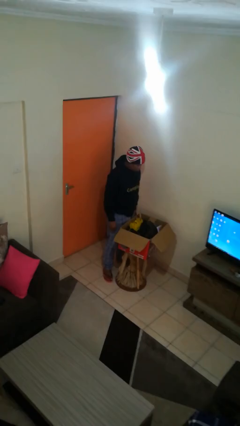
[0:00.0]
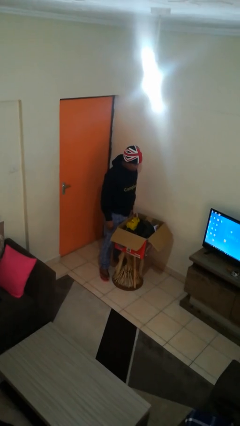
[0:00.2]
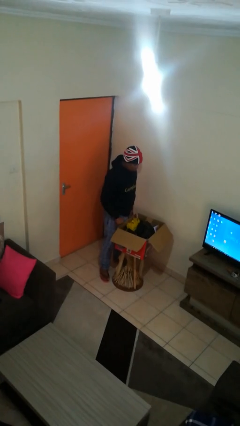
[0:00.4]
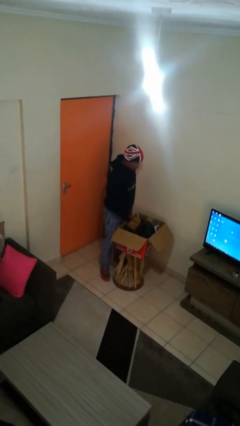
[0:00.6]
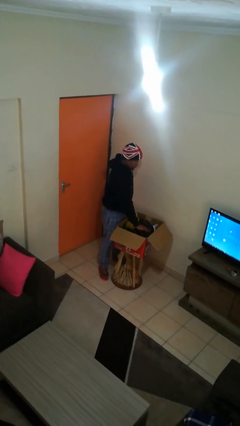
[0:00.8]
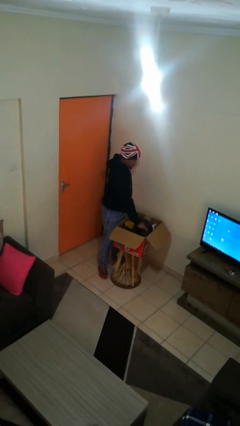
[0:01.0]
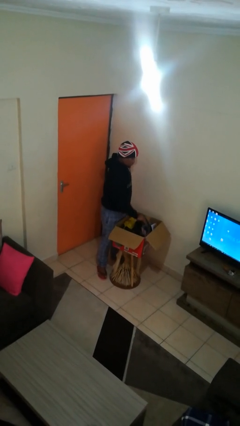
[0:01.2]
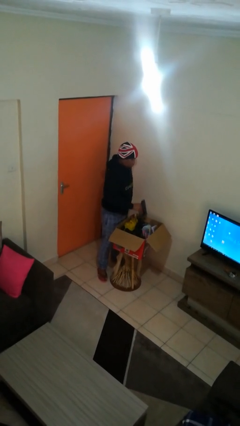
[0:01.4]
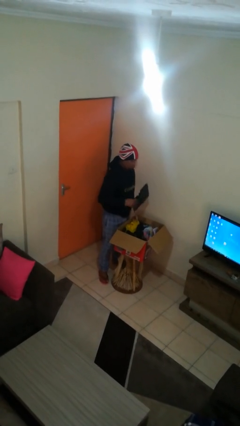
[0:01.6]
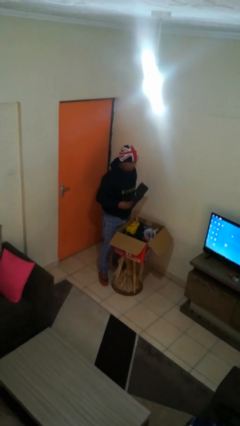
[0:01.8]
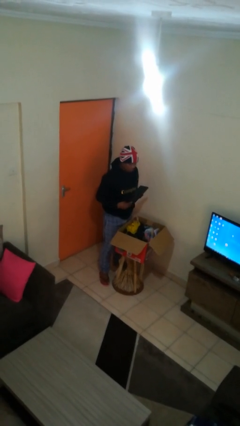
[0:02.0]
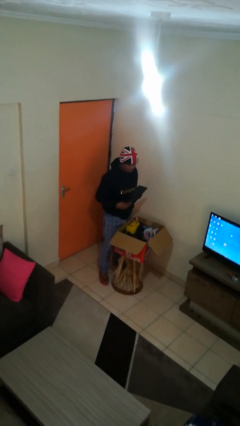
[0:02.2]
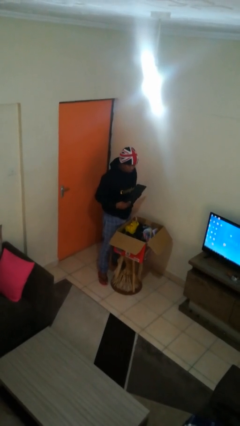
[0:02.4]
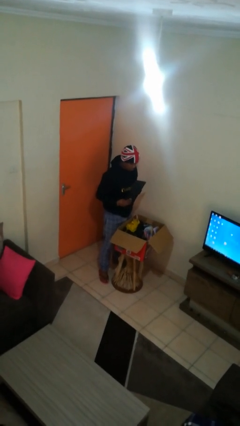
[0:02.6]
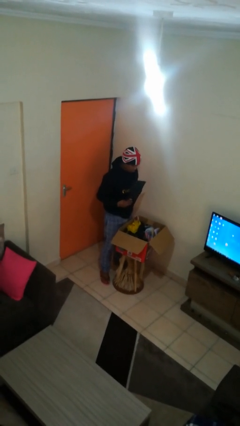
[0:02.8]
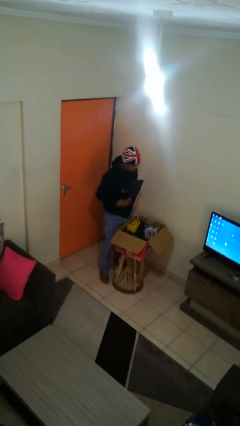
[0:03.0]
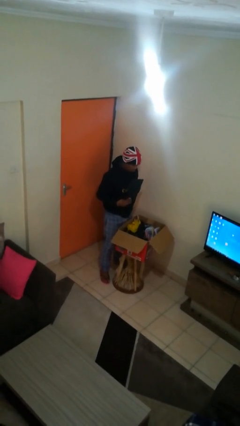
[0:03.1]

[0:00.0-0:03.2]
person takes object from box

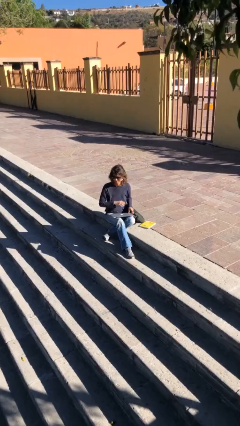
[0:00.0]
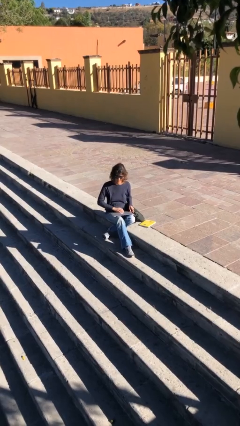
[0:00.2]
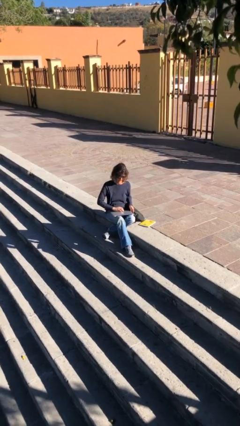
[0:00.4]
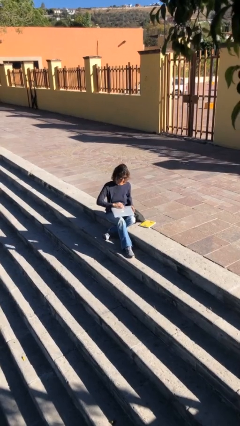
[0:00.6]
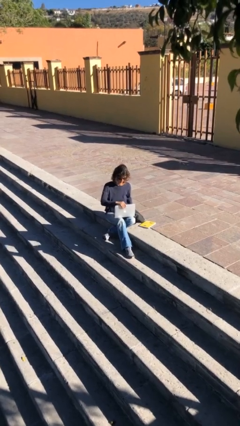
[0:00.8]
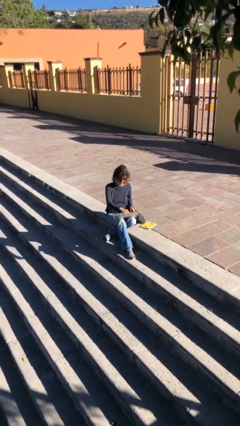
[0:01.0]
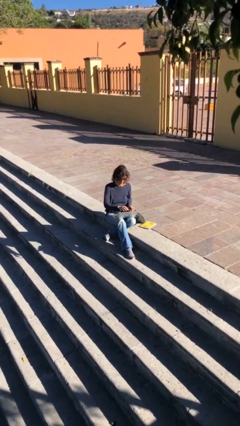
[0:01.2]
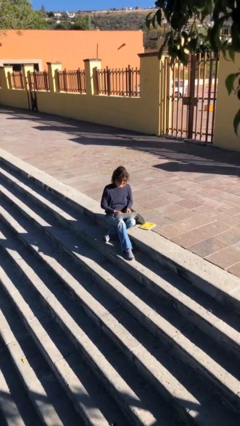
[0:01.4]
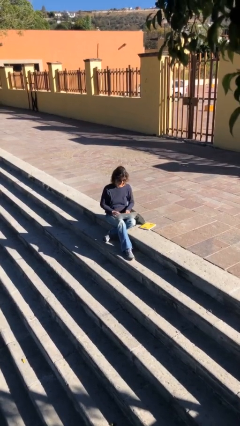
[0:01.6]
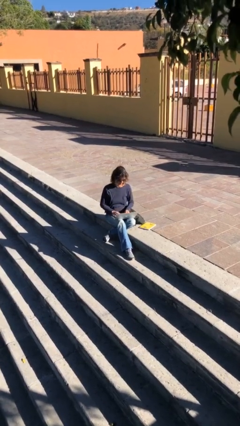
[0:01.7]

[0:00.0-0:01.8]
person interacts with laptop

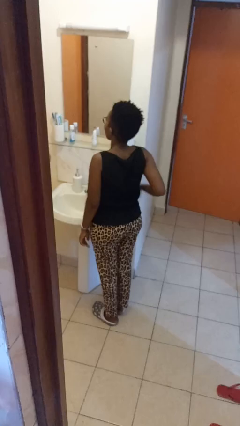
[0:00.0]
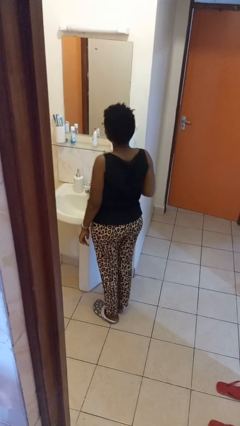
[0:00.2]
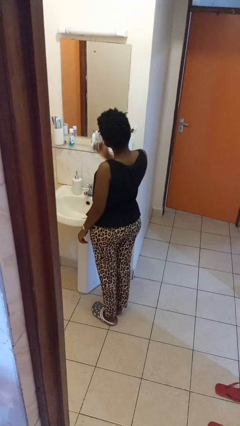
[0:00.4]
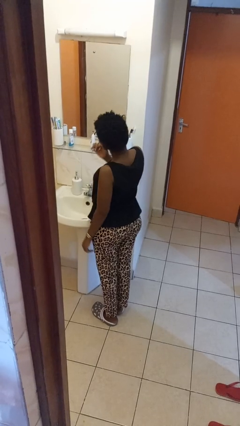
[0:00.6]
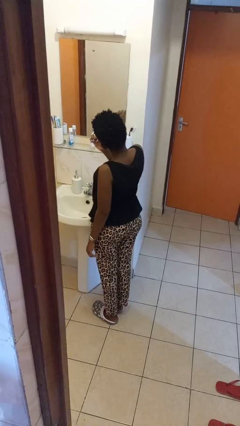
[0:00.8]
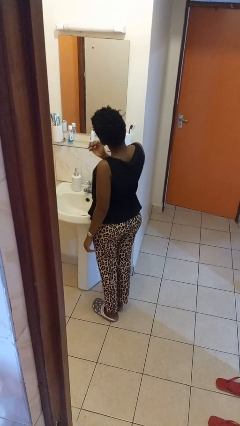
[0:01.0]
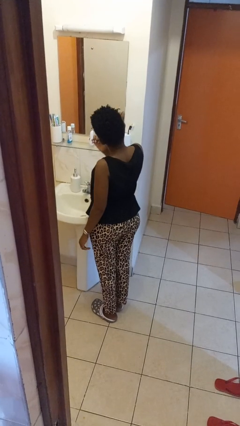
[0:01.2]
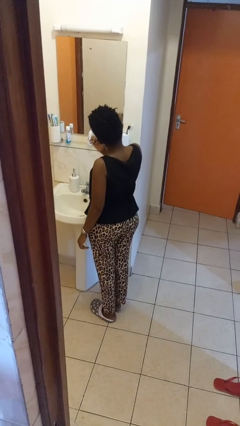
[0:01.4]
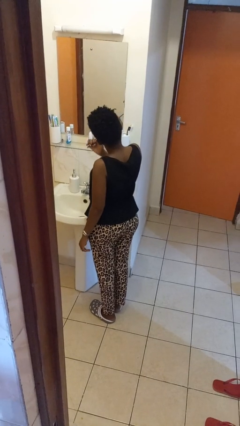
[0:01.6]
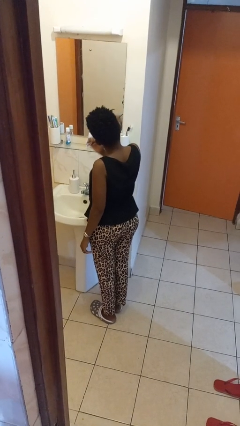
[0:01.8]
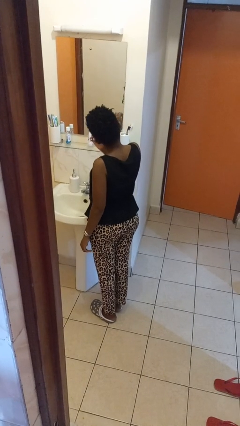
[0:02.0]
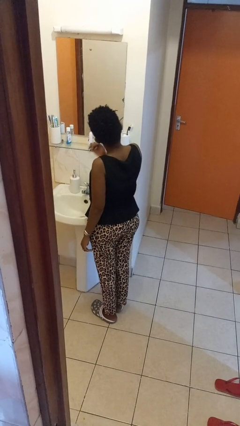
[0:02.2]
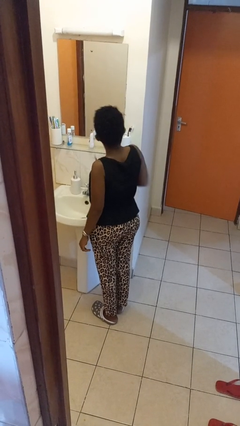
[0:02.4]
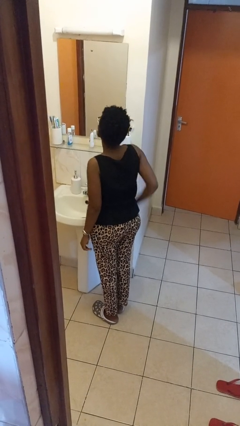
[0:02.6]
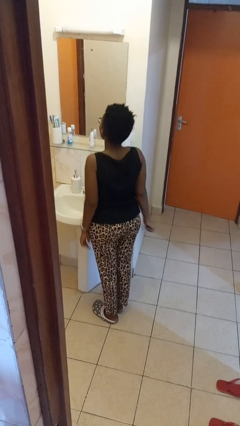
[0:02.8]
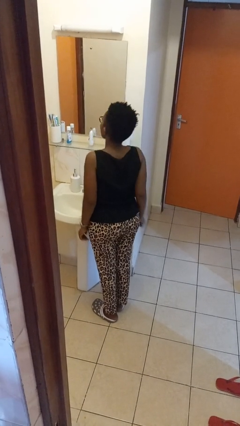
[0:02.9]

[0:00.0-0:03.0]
person brushes teeth

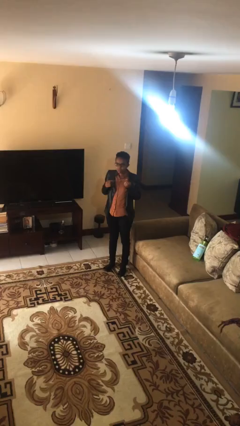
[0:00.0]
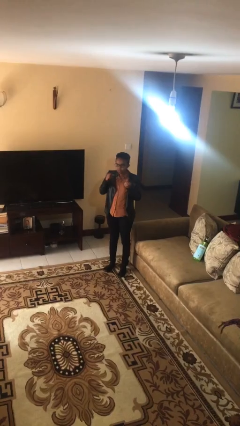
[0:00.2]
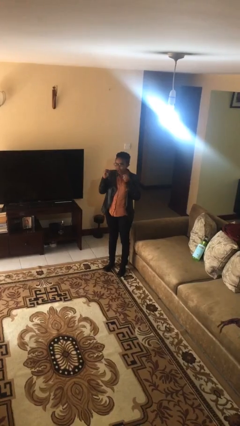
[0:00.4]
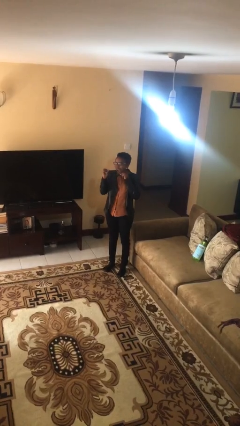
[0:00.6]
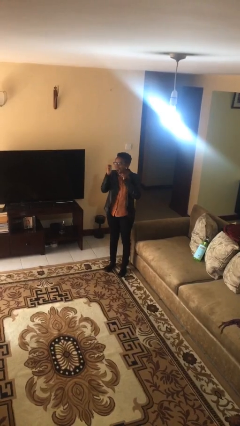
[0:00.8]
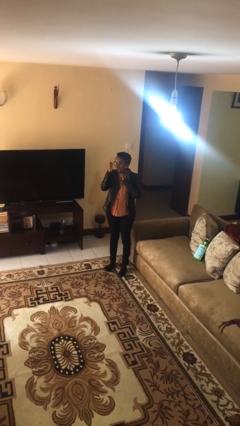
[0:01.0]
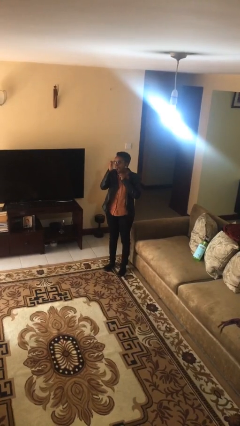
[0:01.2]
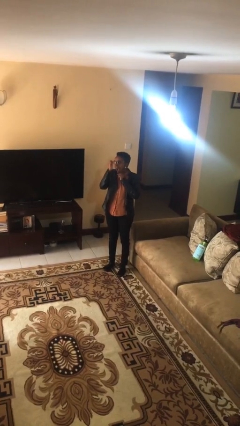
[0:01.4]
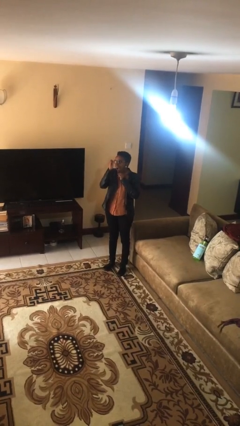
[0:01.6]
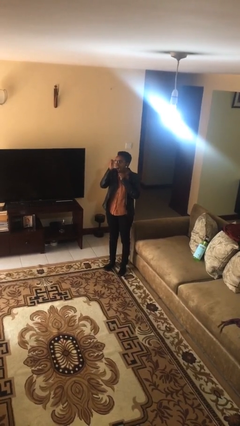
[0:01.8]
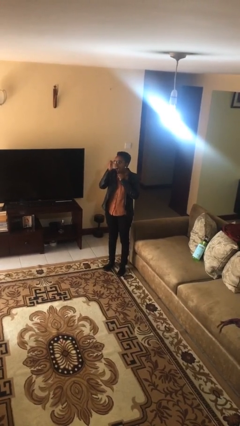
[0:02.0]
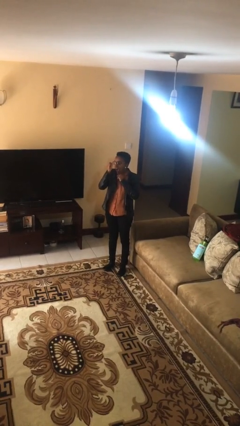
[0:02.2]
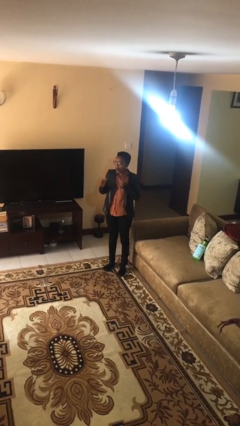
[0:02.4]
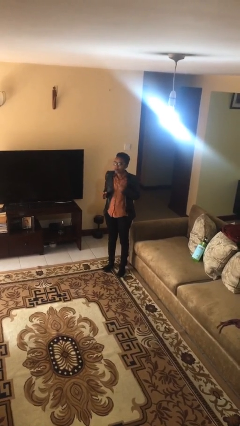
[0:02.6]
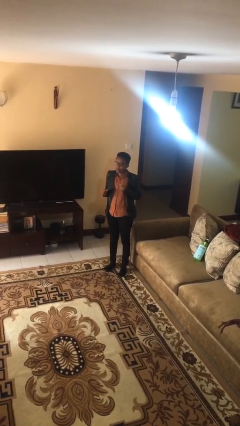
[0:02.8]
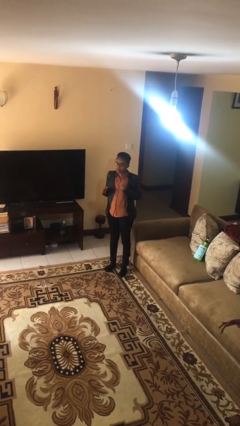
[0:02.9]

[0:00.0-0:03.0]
person flosses

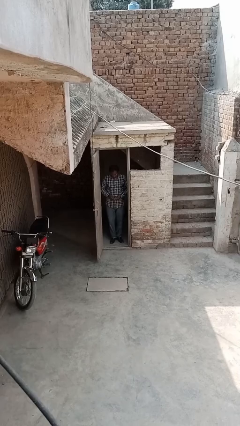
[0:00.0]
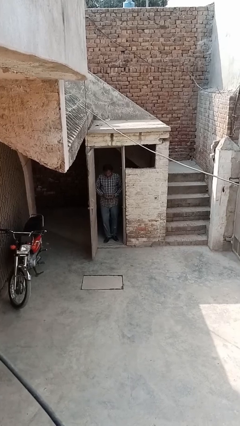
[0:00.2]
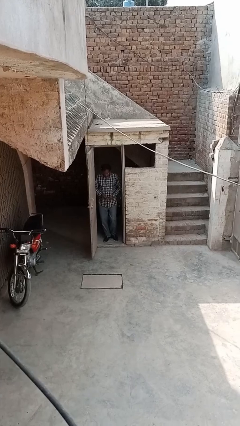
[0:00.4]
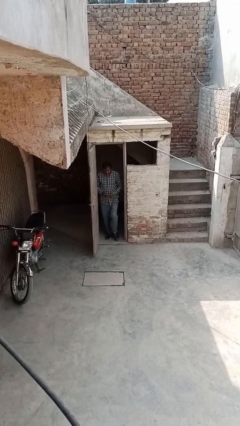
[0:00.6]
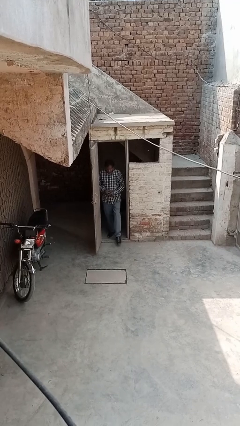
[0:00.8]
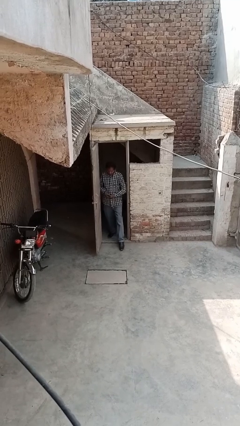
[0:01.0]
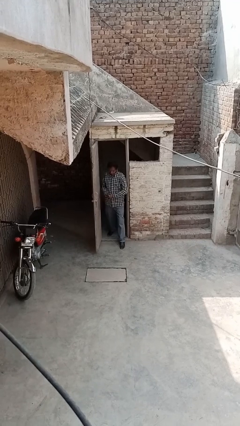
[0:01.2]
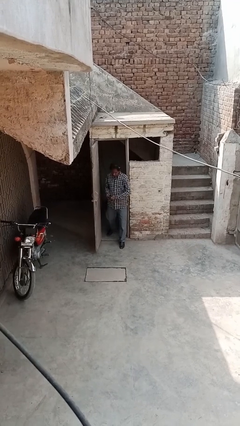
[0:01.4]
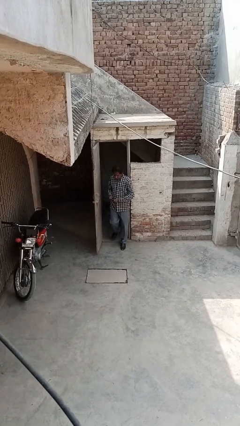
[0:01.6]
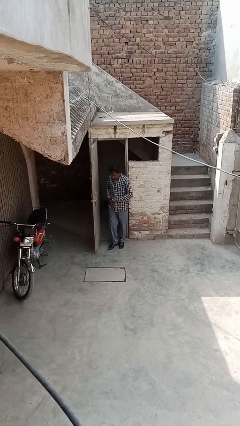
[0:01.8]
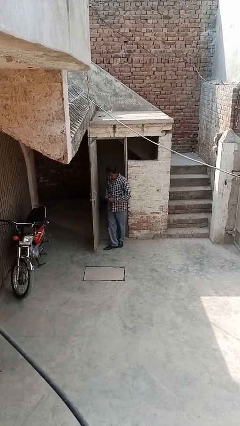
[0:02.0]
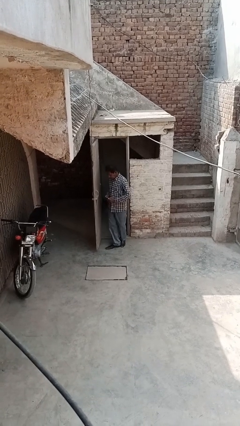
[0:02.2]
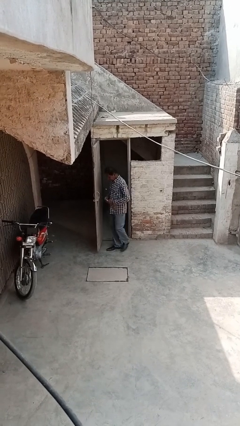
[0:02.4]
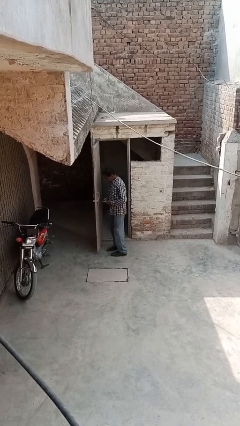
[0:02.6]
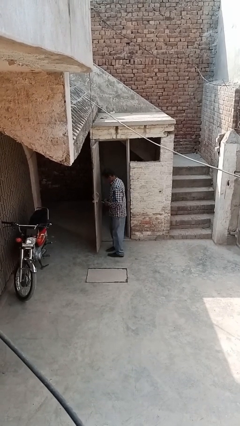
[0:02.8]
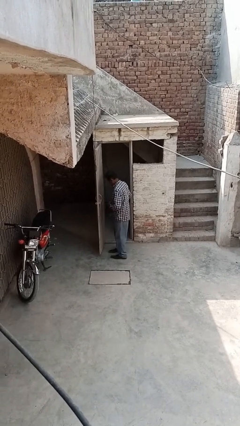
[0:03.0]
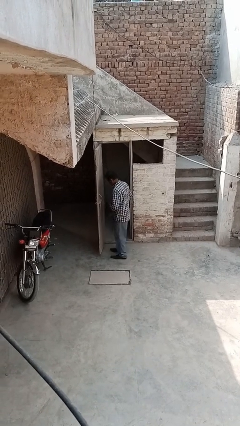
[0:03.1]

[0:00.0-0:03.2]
person enters scene through structure

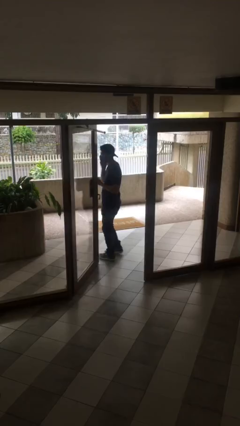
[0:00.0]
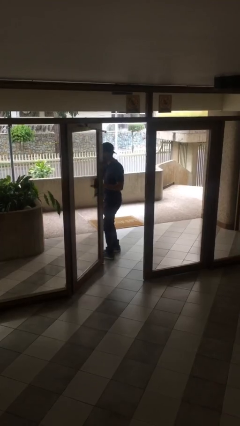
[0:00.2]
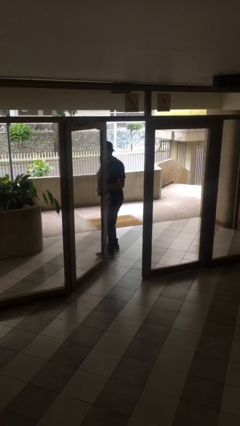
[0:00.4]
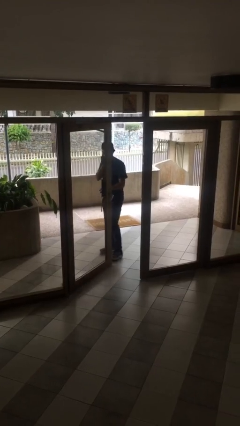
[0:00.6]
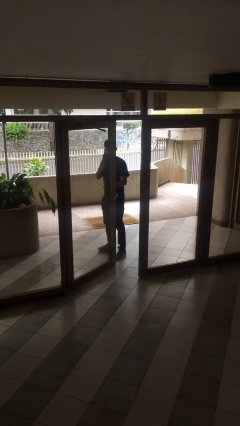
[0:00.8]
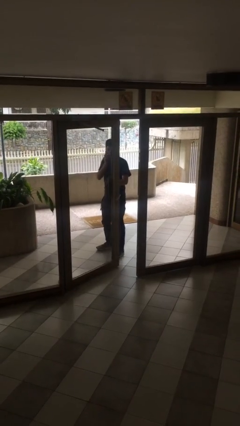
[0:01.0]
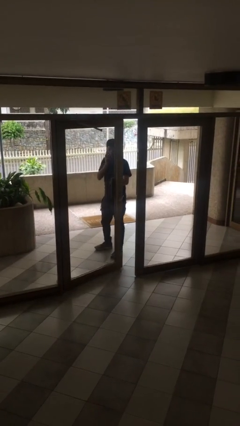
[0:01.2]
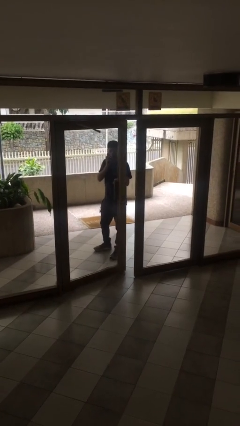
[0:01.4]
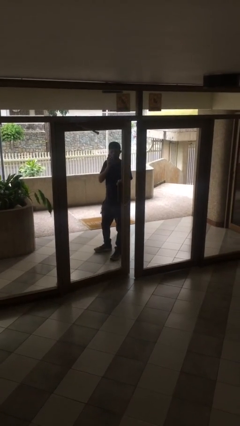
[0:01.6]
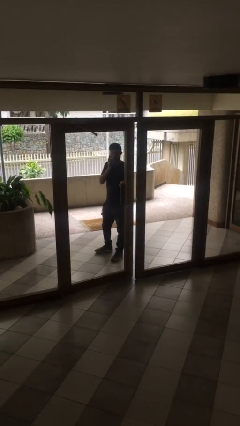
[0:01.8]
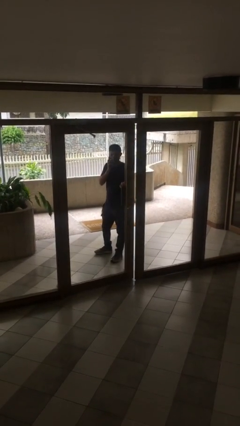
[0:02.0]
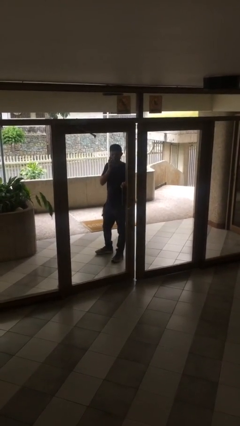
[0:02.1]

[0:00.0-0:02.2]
person closes facility door

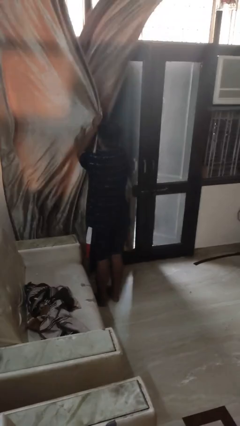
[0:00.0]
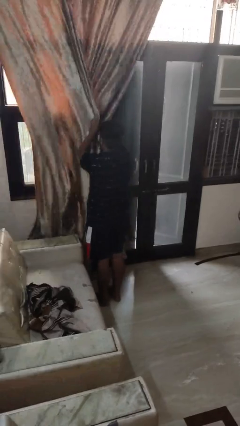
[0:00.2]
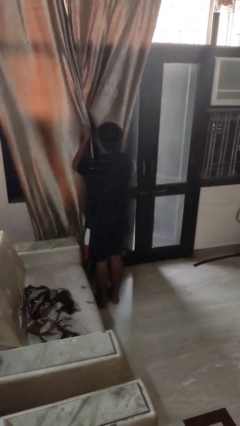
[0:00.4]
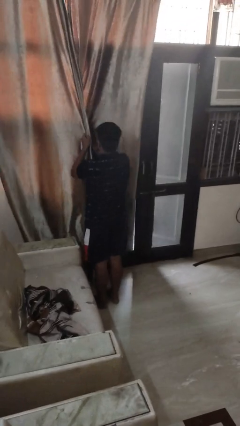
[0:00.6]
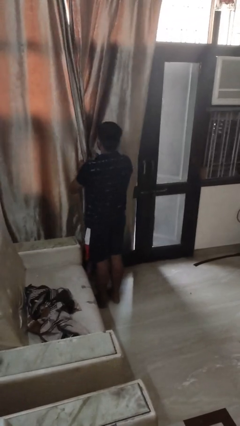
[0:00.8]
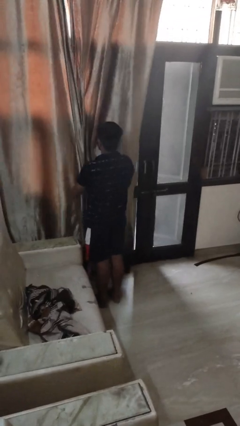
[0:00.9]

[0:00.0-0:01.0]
person closes curtains

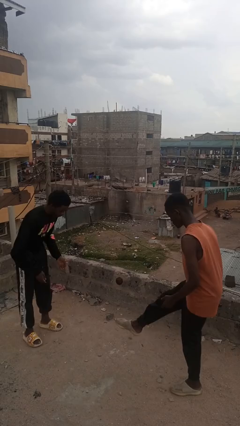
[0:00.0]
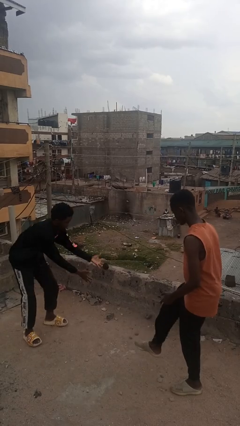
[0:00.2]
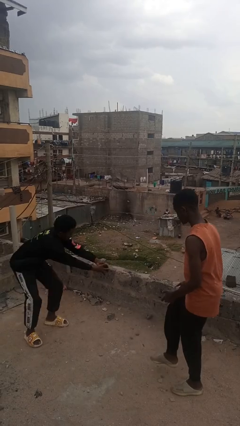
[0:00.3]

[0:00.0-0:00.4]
person kicks object to person
